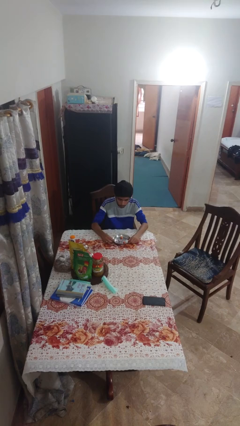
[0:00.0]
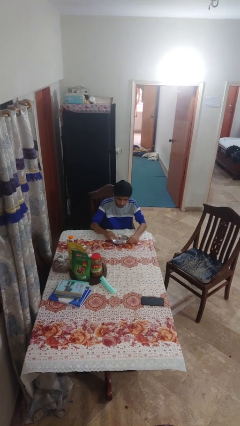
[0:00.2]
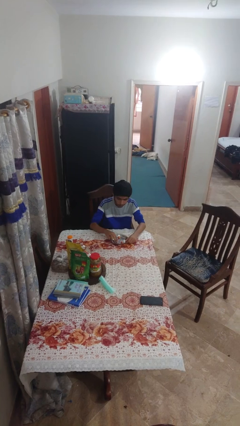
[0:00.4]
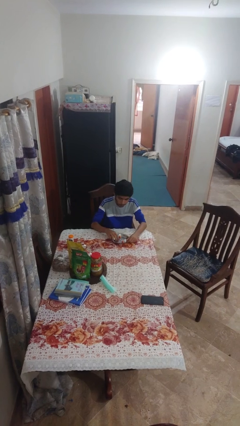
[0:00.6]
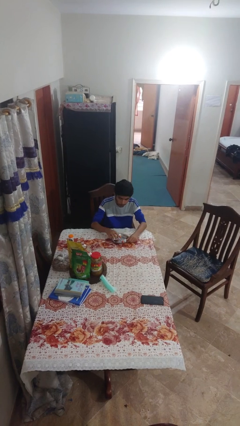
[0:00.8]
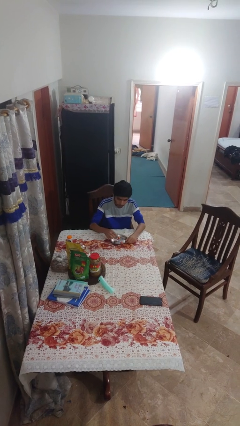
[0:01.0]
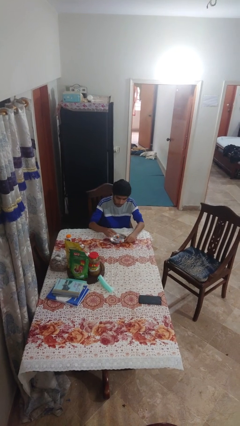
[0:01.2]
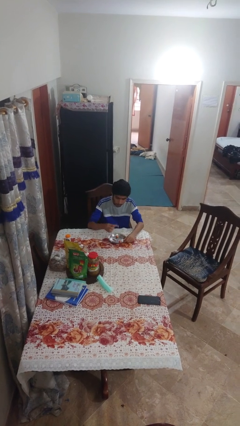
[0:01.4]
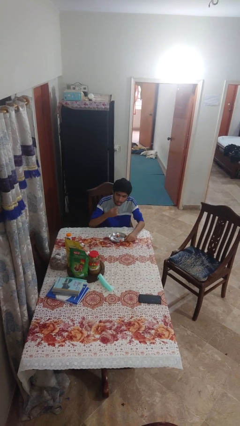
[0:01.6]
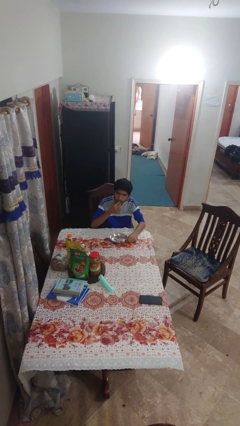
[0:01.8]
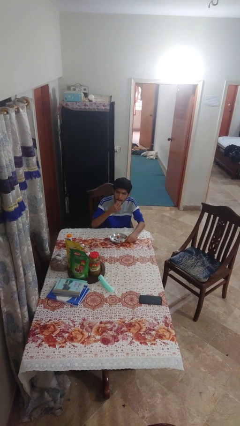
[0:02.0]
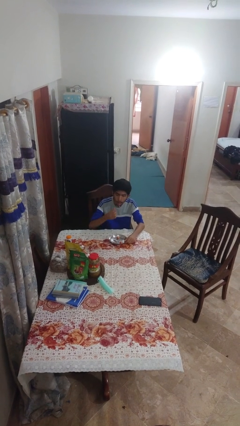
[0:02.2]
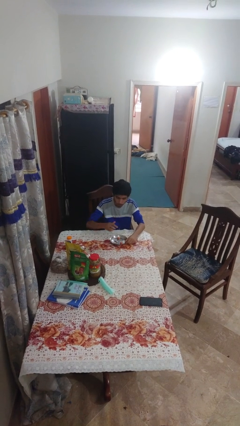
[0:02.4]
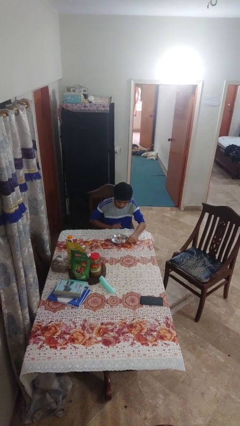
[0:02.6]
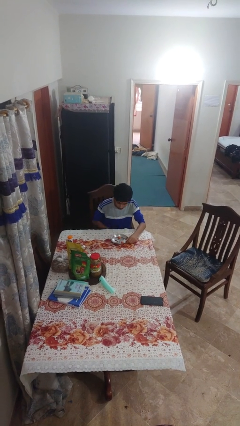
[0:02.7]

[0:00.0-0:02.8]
person eats with hands

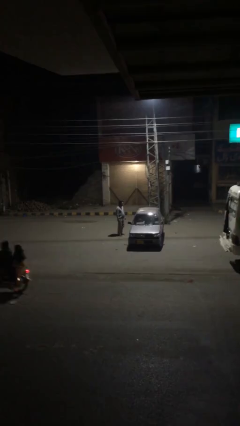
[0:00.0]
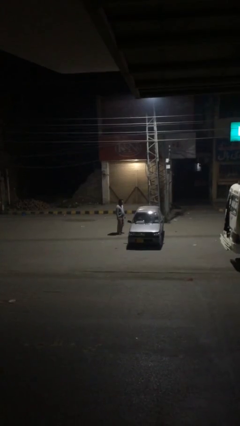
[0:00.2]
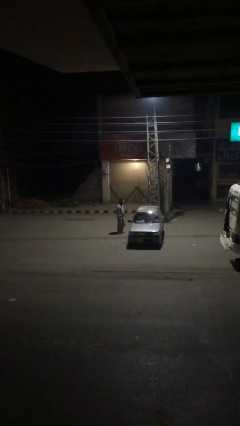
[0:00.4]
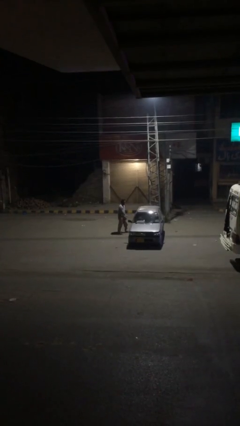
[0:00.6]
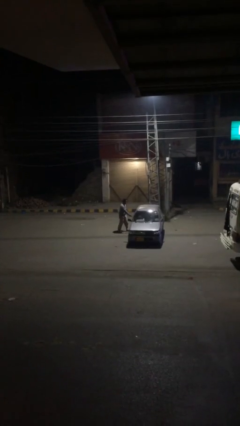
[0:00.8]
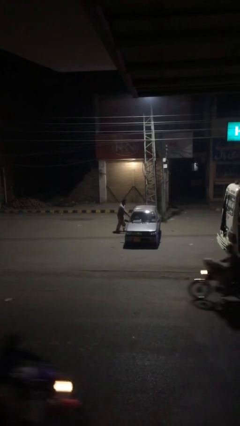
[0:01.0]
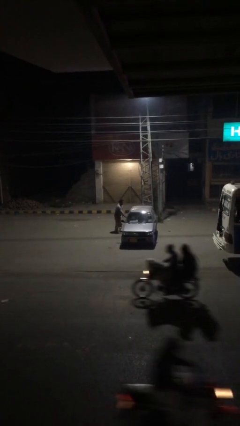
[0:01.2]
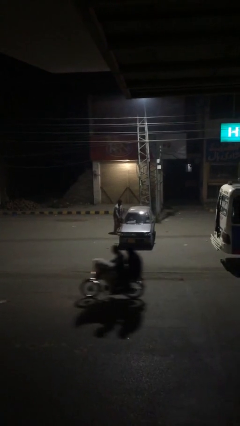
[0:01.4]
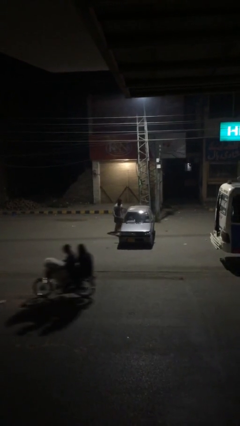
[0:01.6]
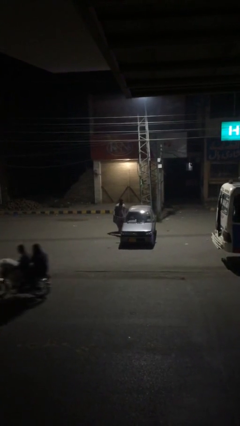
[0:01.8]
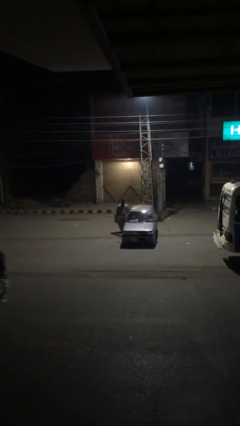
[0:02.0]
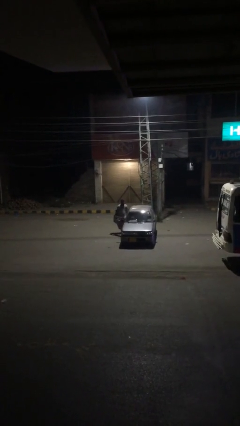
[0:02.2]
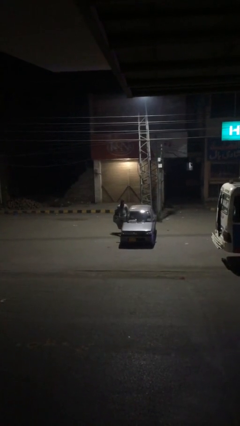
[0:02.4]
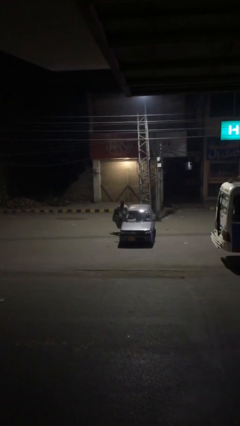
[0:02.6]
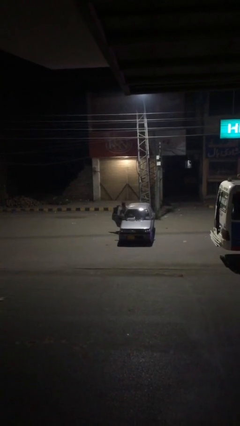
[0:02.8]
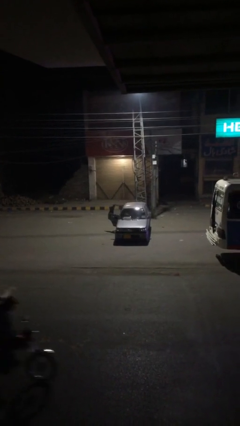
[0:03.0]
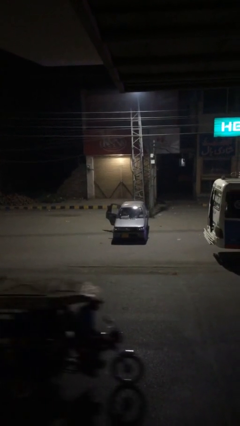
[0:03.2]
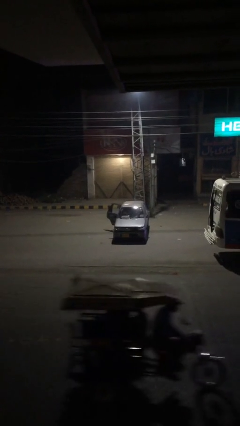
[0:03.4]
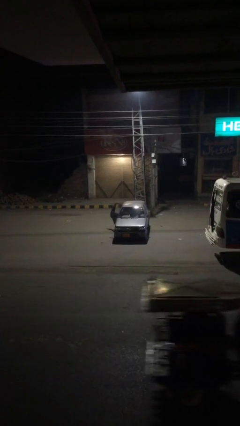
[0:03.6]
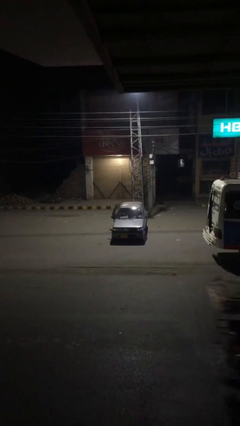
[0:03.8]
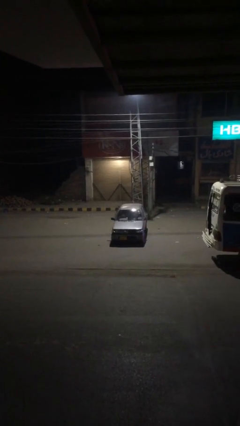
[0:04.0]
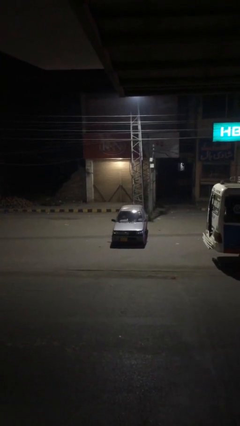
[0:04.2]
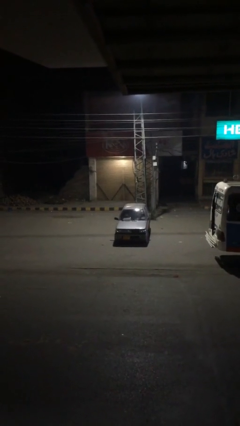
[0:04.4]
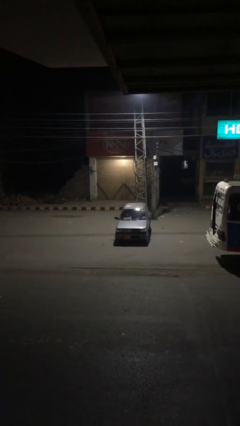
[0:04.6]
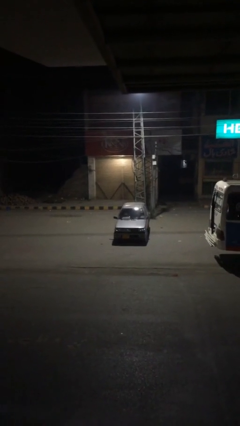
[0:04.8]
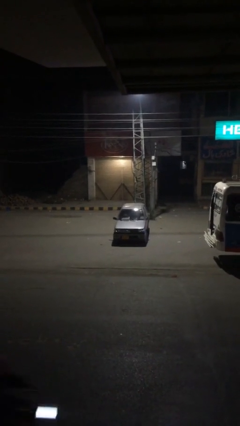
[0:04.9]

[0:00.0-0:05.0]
car picks up person

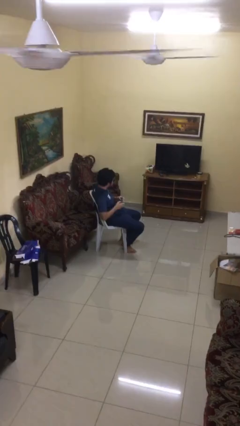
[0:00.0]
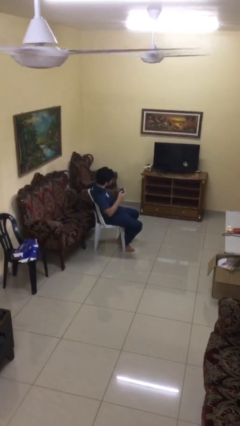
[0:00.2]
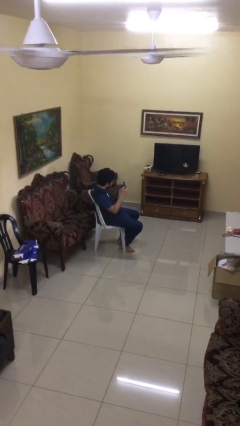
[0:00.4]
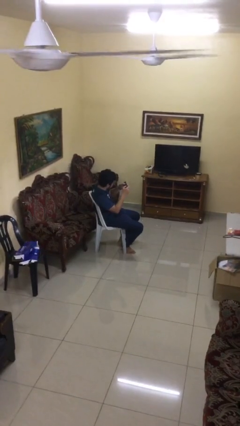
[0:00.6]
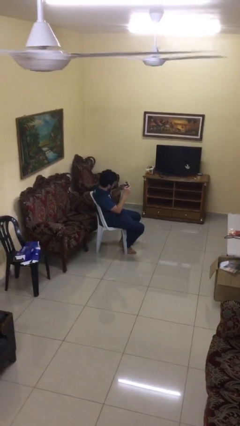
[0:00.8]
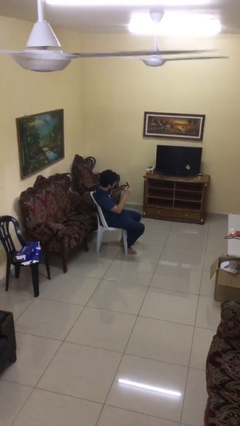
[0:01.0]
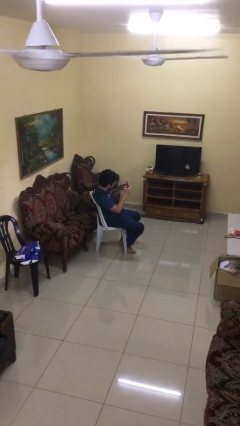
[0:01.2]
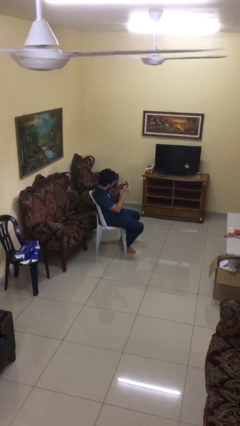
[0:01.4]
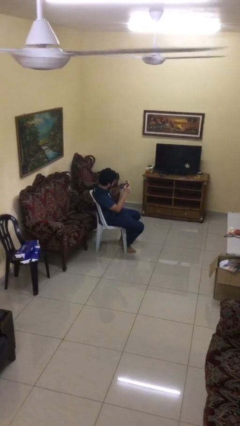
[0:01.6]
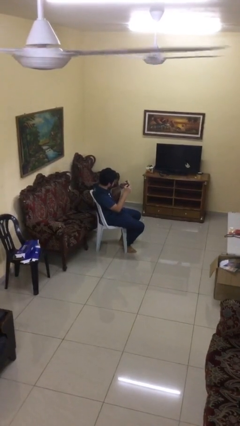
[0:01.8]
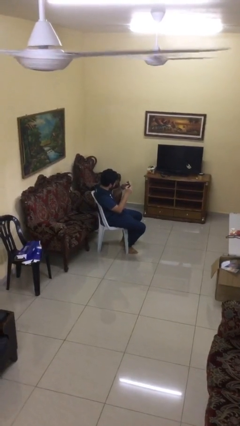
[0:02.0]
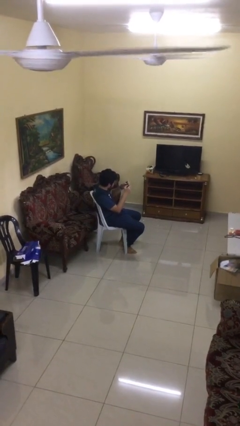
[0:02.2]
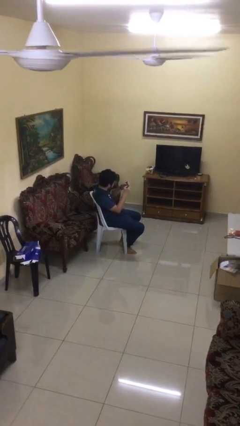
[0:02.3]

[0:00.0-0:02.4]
person interacts with handheld game

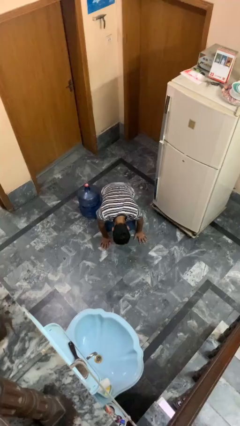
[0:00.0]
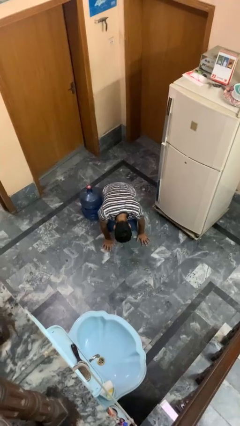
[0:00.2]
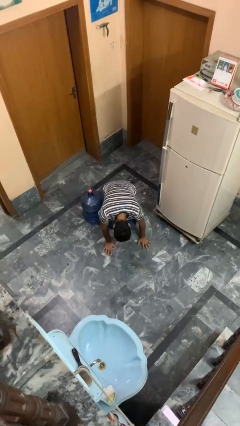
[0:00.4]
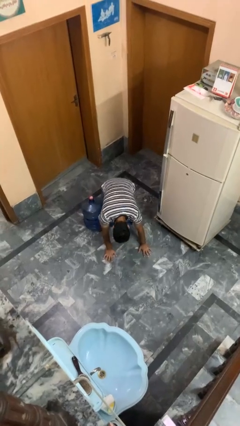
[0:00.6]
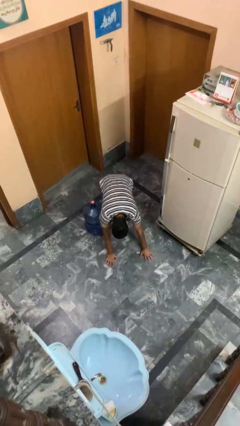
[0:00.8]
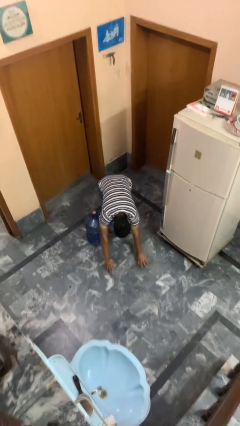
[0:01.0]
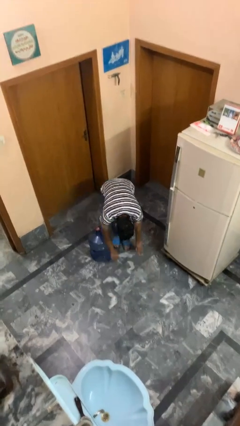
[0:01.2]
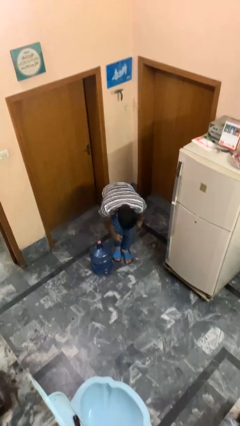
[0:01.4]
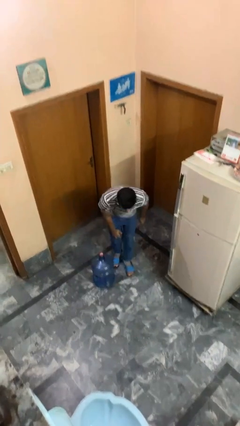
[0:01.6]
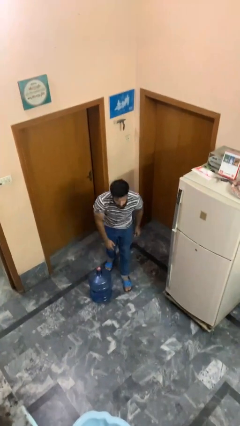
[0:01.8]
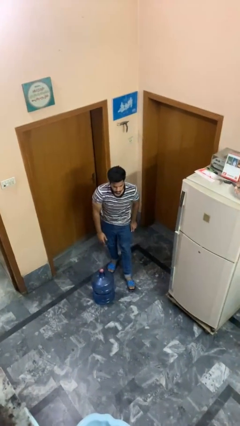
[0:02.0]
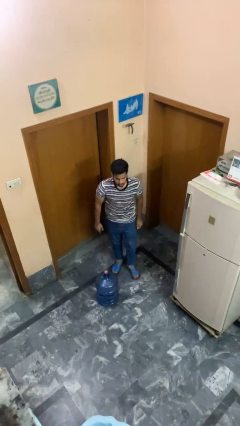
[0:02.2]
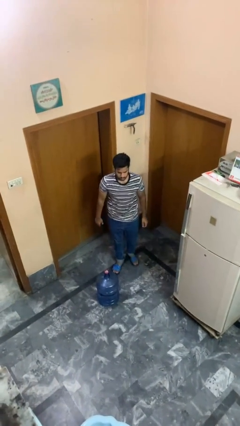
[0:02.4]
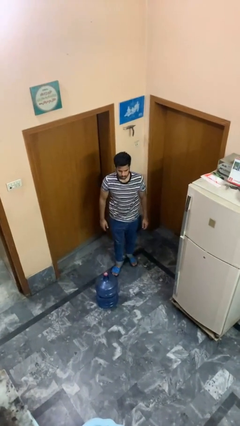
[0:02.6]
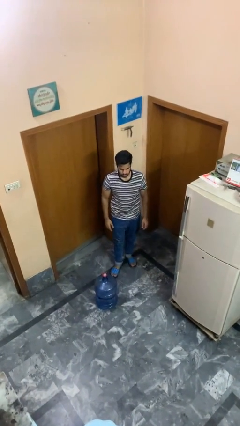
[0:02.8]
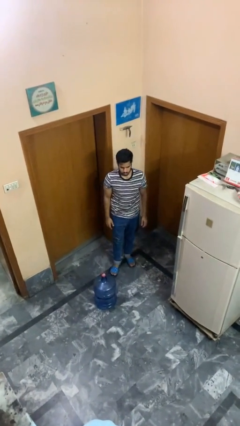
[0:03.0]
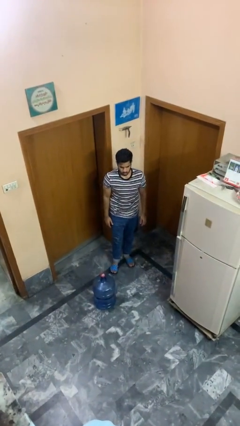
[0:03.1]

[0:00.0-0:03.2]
person stands up from floor

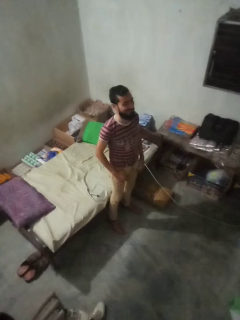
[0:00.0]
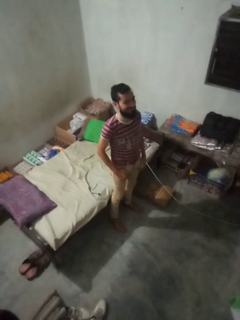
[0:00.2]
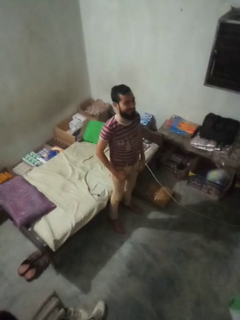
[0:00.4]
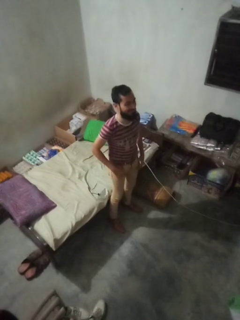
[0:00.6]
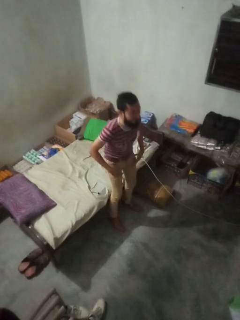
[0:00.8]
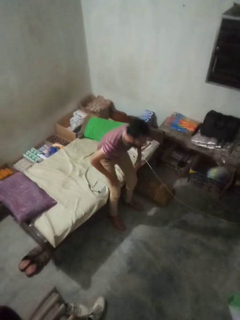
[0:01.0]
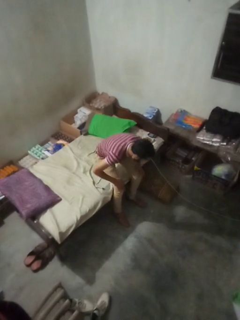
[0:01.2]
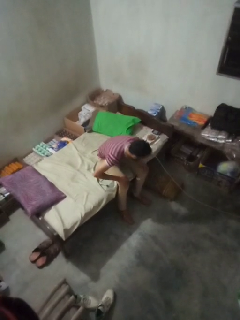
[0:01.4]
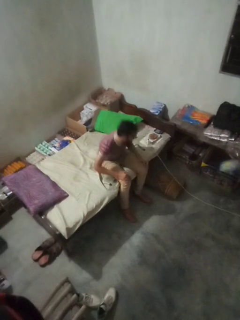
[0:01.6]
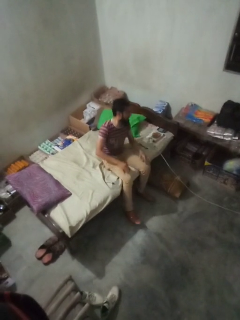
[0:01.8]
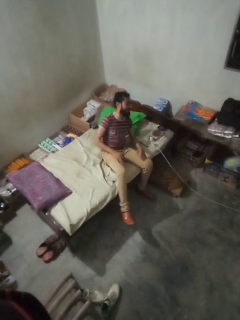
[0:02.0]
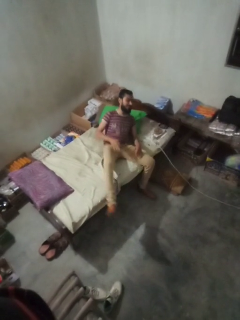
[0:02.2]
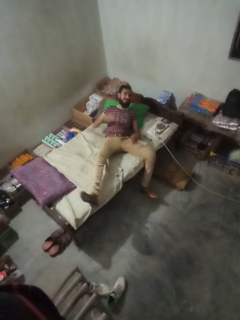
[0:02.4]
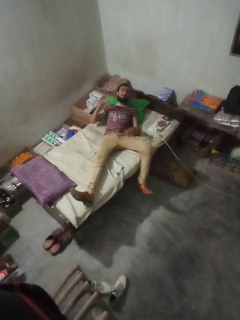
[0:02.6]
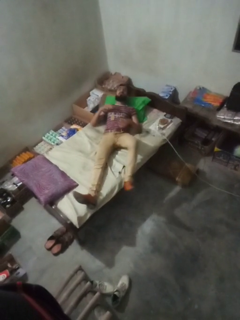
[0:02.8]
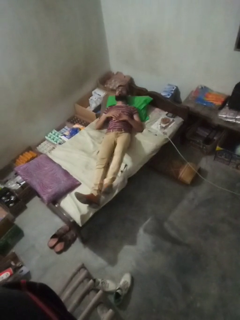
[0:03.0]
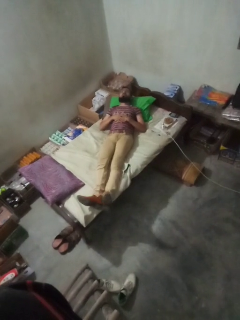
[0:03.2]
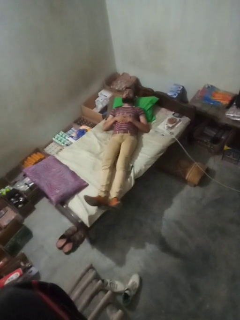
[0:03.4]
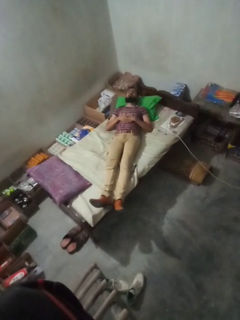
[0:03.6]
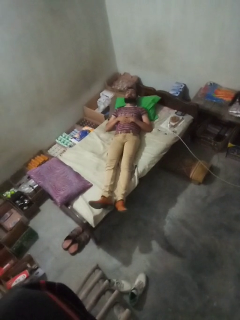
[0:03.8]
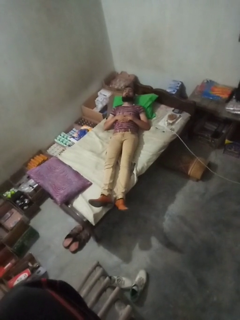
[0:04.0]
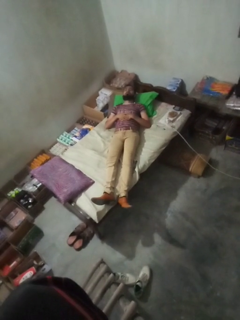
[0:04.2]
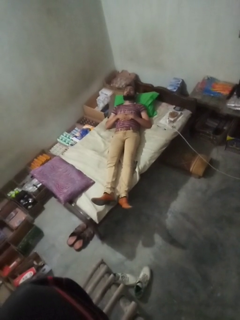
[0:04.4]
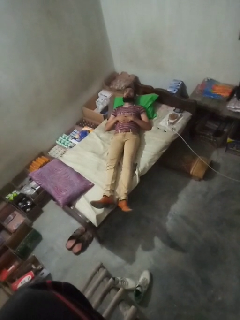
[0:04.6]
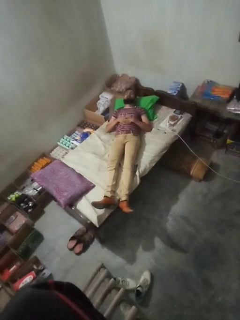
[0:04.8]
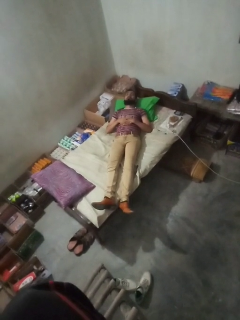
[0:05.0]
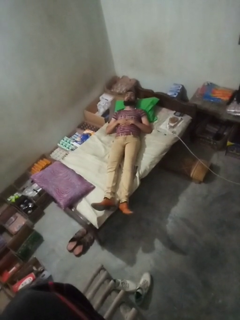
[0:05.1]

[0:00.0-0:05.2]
person lies down on bed

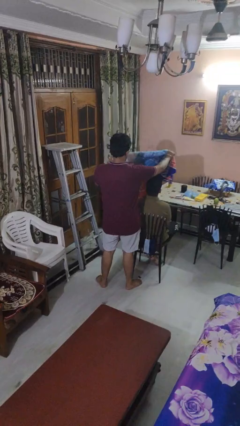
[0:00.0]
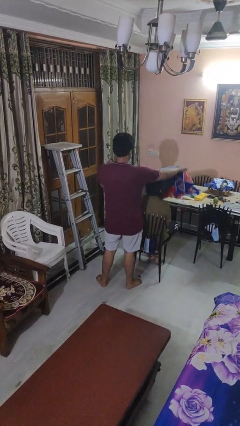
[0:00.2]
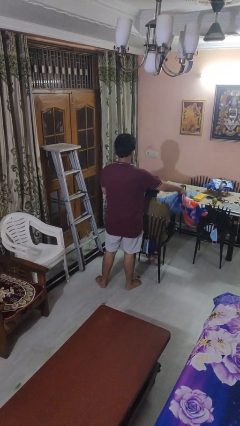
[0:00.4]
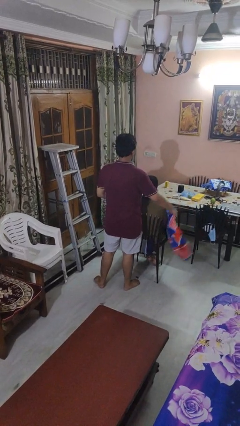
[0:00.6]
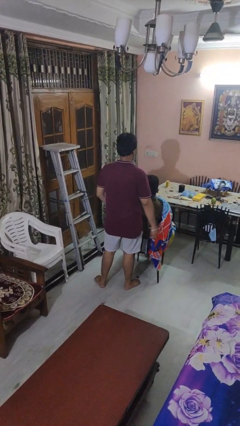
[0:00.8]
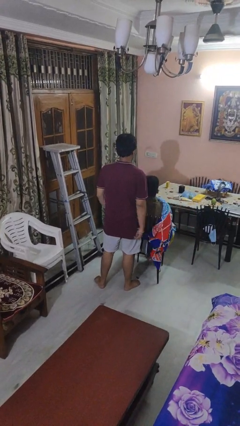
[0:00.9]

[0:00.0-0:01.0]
person covers friend with blanket
